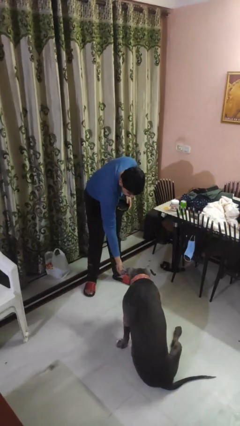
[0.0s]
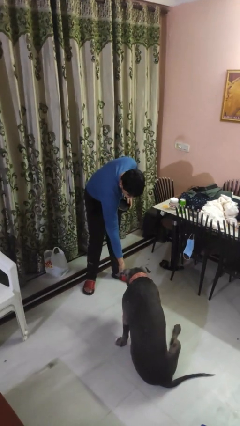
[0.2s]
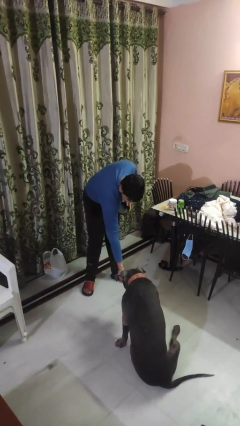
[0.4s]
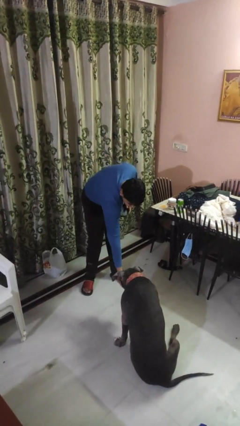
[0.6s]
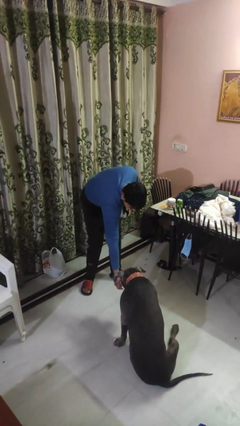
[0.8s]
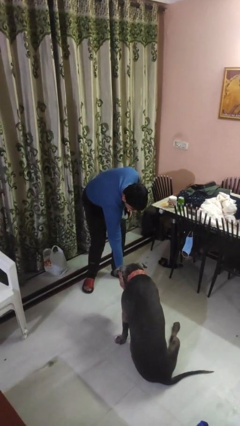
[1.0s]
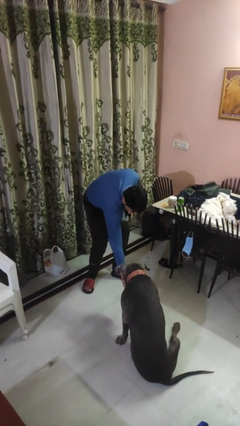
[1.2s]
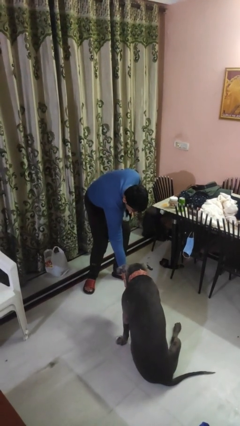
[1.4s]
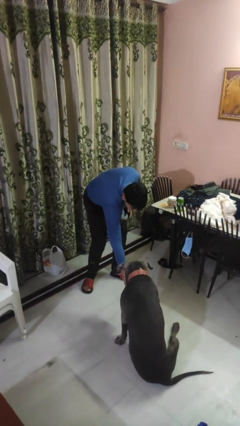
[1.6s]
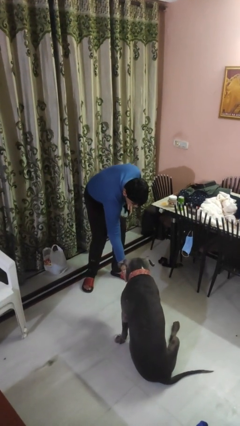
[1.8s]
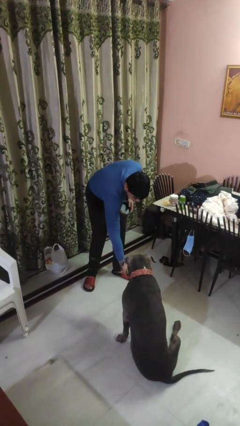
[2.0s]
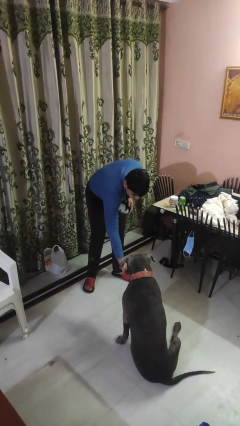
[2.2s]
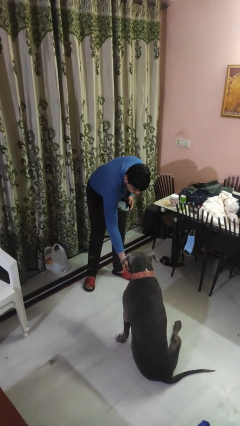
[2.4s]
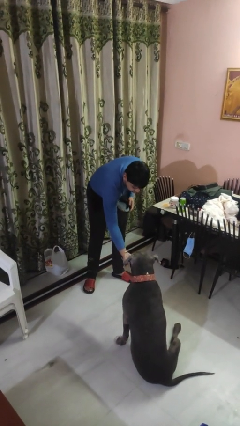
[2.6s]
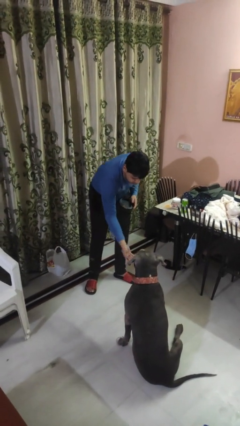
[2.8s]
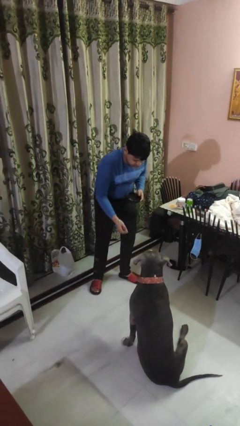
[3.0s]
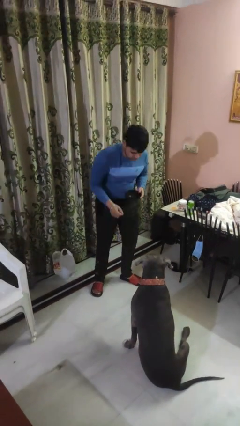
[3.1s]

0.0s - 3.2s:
person feeds dog

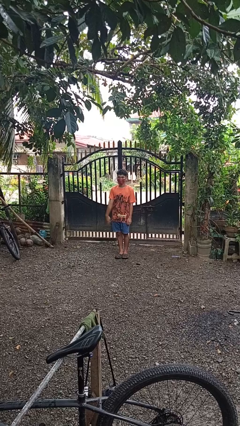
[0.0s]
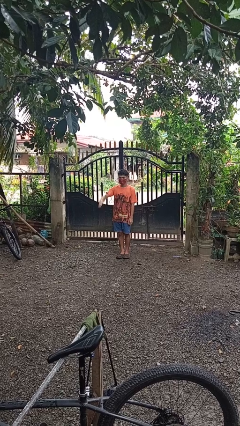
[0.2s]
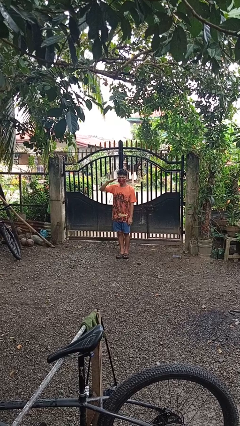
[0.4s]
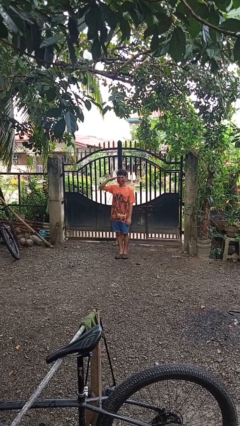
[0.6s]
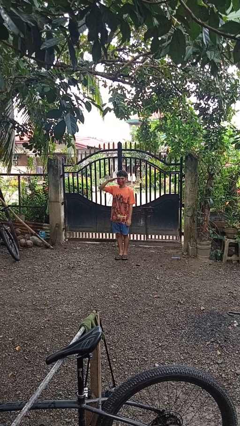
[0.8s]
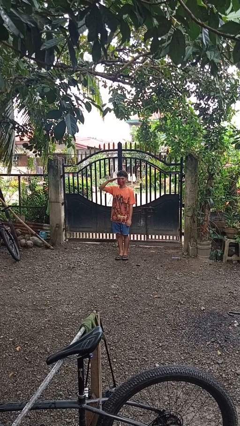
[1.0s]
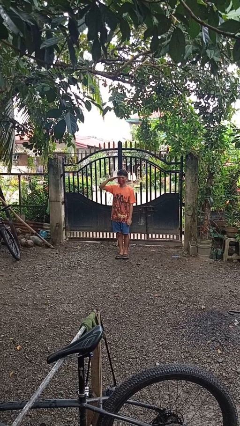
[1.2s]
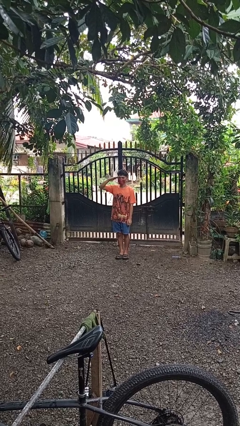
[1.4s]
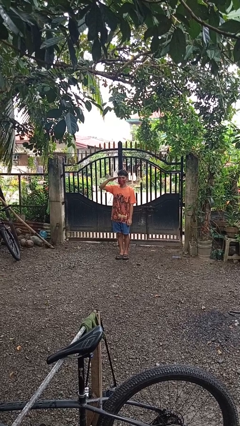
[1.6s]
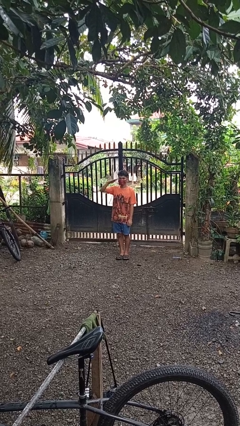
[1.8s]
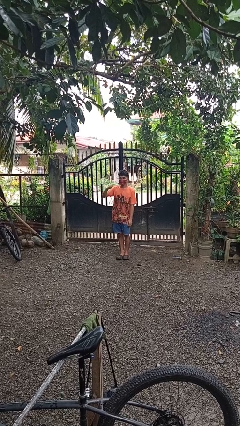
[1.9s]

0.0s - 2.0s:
person salutes

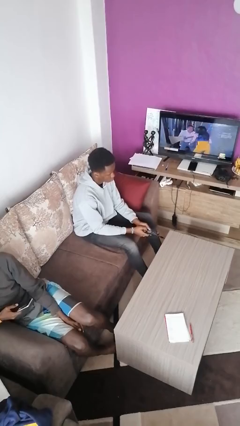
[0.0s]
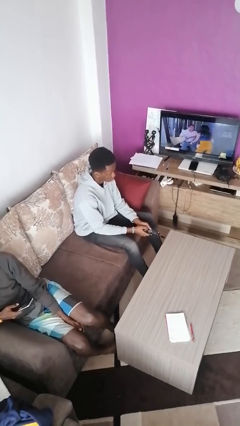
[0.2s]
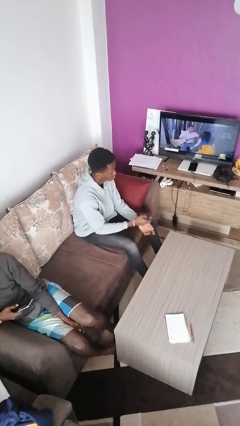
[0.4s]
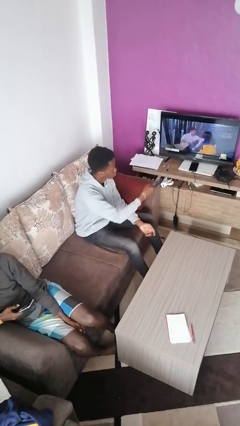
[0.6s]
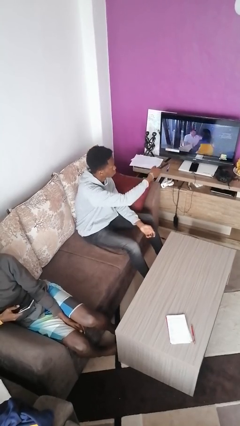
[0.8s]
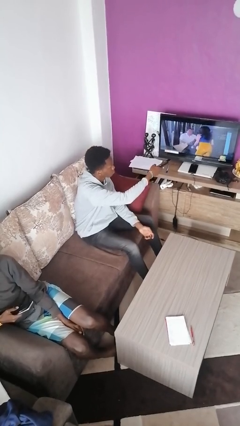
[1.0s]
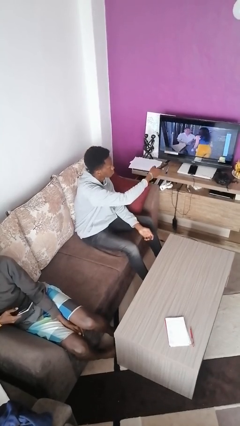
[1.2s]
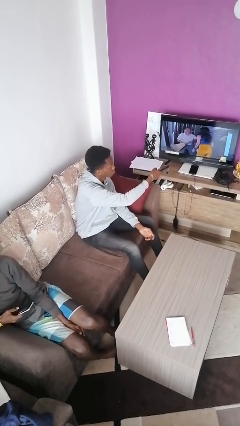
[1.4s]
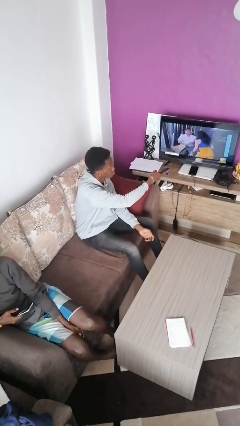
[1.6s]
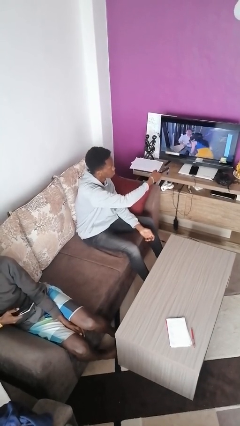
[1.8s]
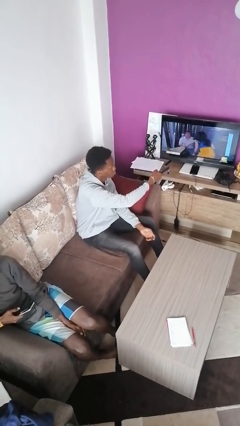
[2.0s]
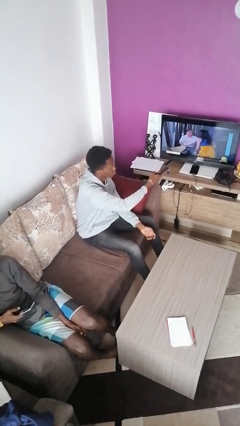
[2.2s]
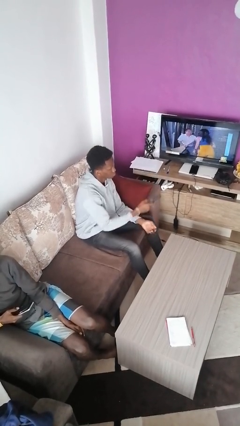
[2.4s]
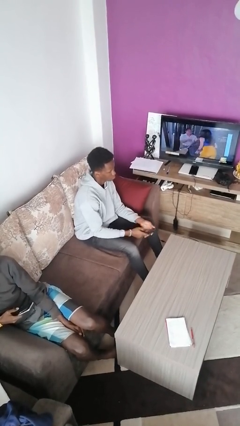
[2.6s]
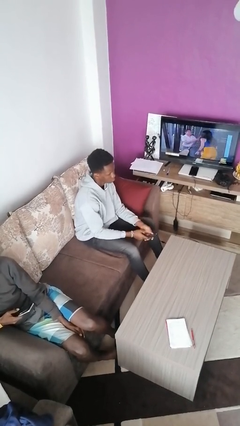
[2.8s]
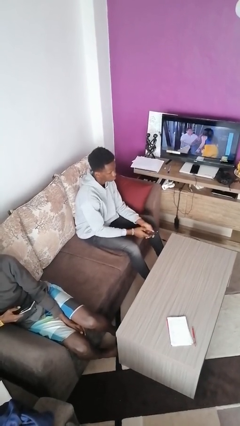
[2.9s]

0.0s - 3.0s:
person uses television remote

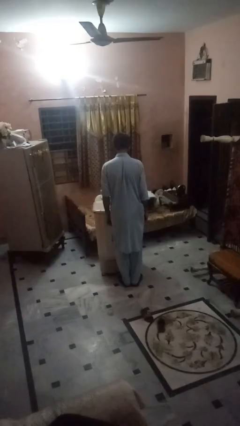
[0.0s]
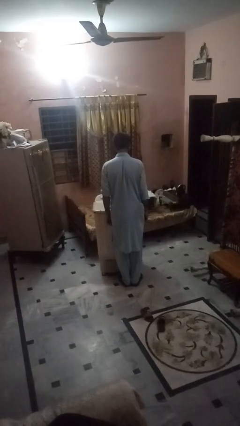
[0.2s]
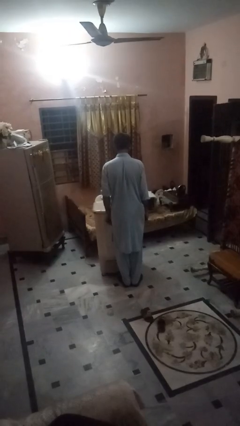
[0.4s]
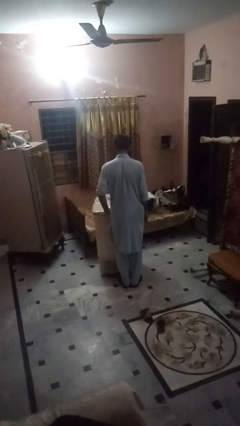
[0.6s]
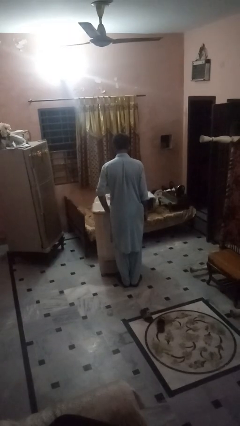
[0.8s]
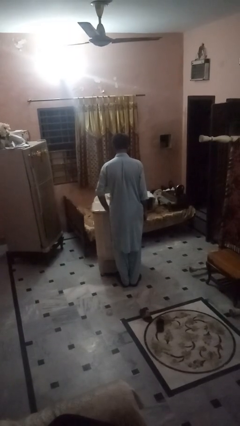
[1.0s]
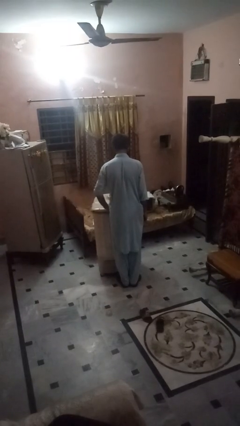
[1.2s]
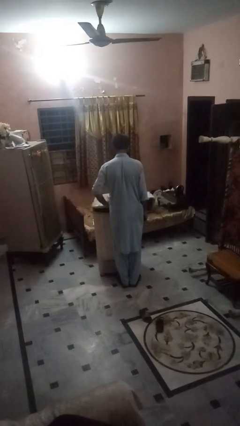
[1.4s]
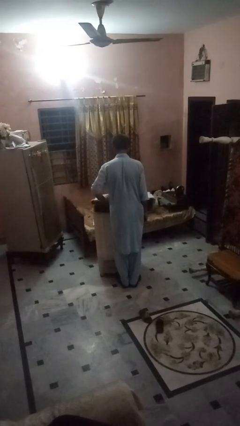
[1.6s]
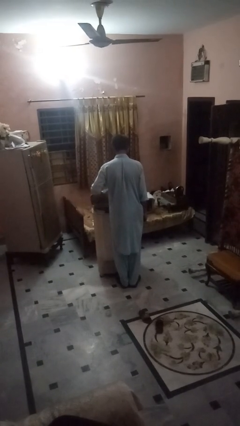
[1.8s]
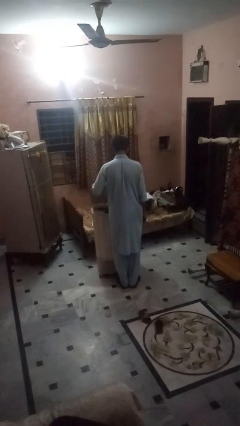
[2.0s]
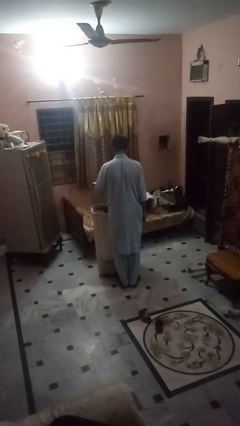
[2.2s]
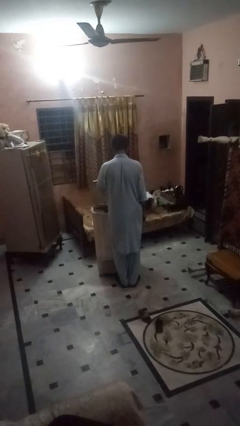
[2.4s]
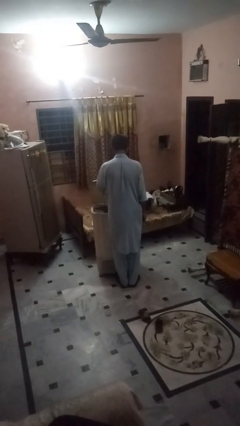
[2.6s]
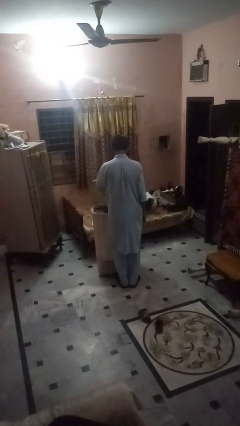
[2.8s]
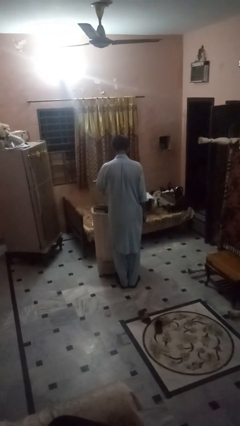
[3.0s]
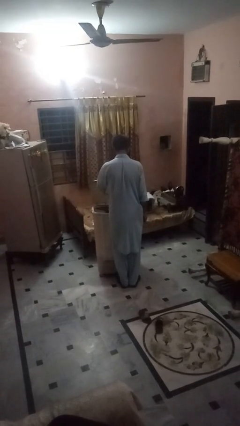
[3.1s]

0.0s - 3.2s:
person opens clothes washer

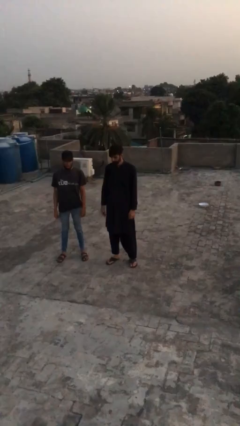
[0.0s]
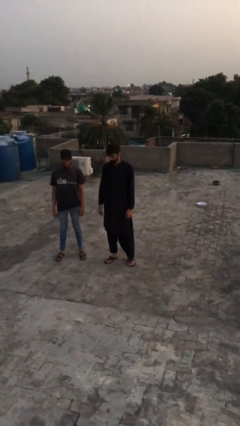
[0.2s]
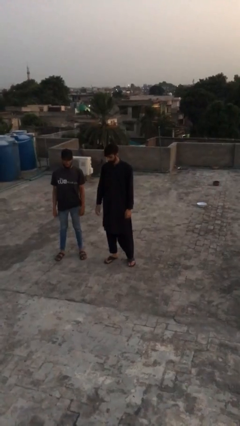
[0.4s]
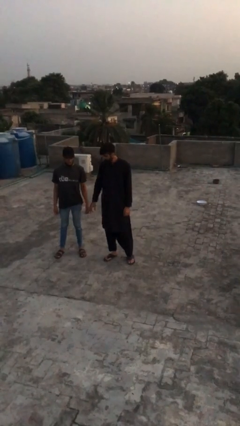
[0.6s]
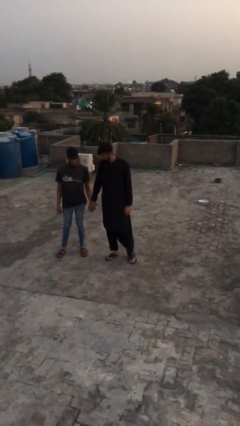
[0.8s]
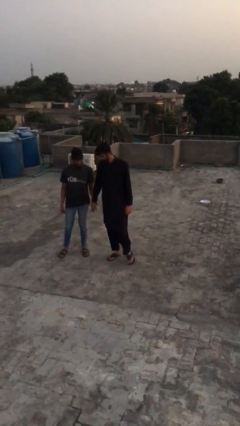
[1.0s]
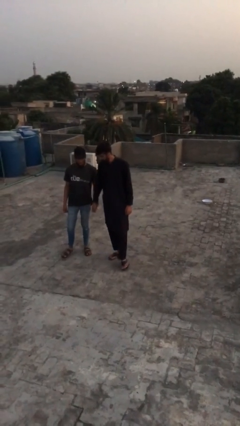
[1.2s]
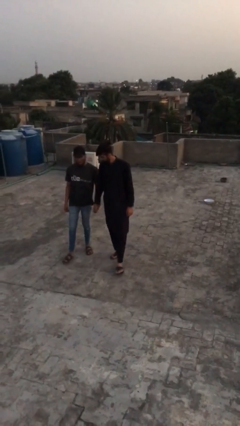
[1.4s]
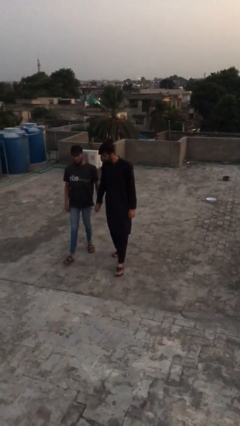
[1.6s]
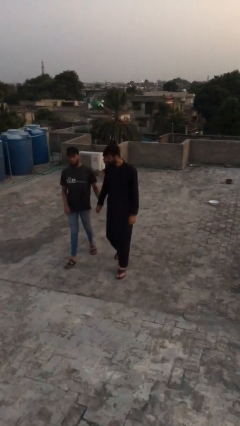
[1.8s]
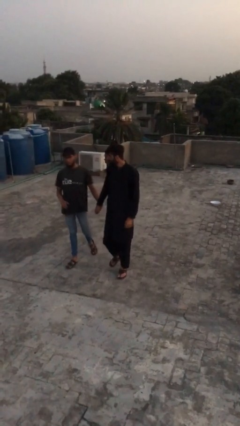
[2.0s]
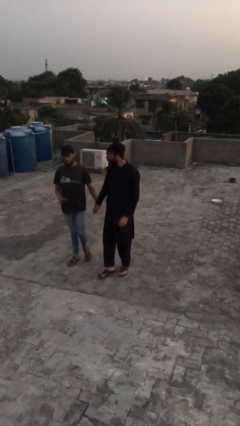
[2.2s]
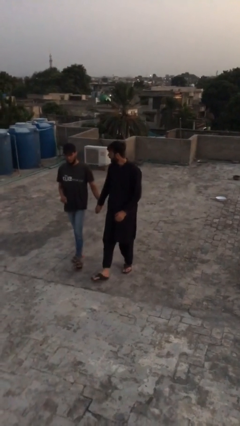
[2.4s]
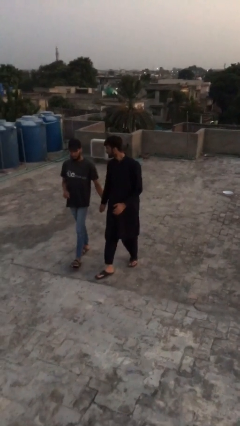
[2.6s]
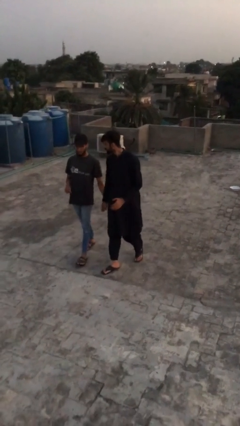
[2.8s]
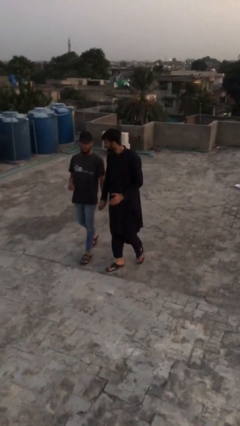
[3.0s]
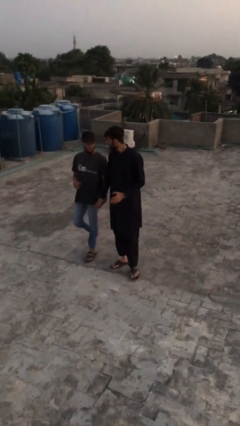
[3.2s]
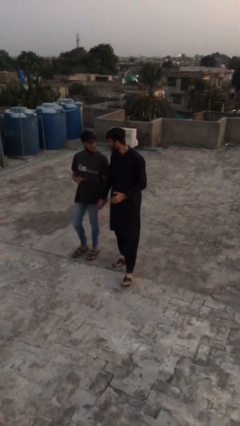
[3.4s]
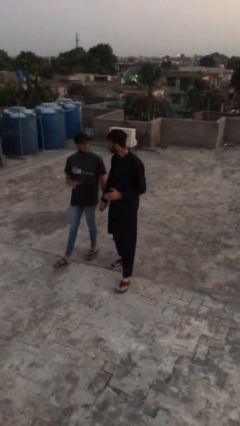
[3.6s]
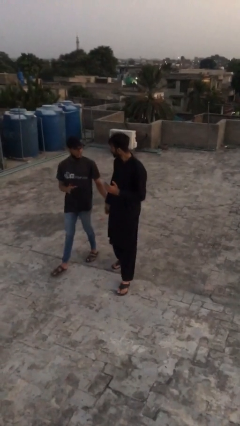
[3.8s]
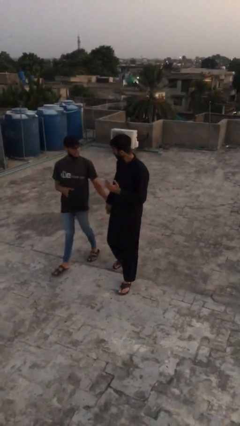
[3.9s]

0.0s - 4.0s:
person holds hand

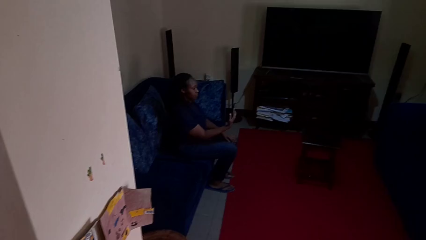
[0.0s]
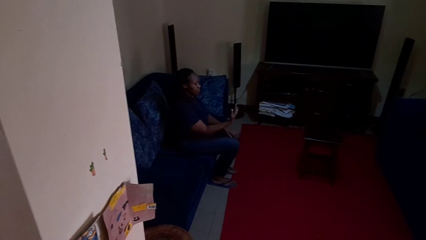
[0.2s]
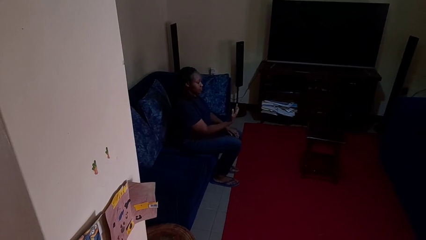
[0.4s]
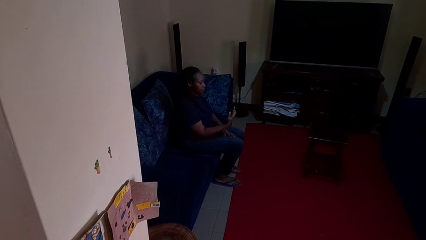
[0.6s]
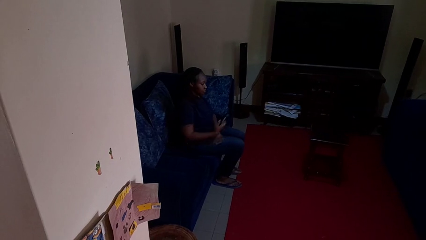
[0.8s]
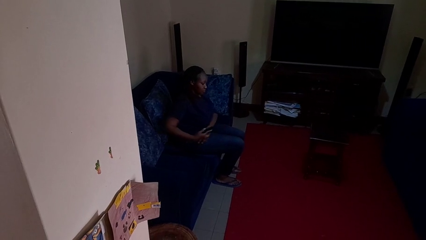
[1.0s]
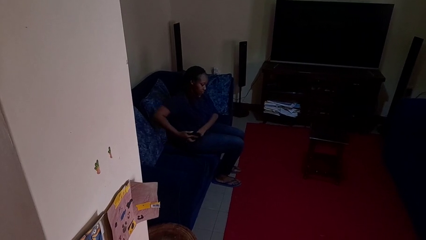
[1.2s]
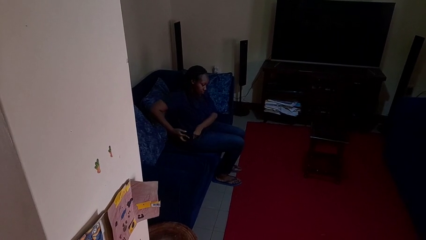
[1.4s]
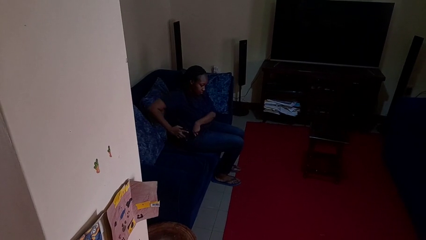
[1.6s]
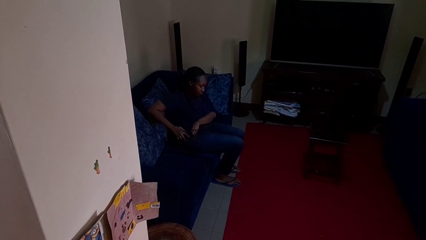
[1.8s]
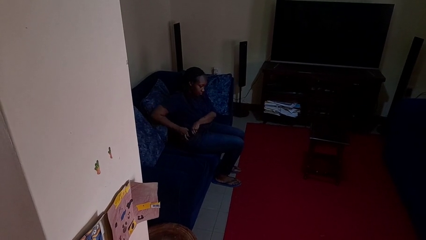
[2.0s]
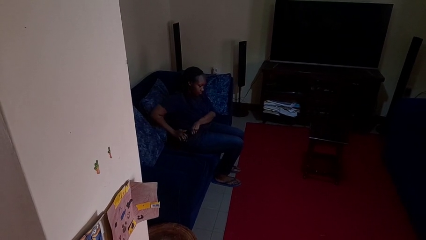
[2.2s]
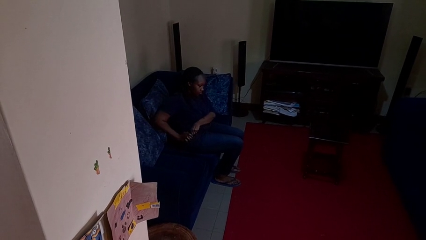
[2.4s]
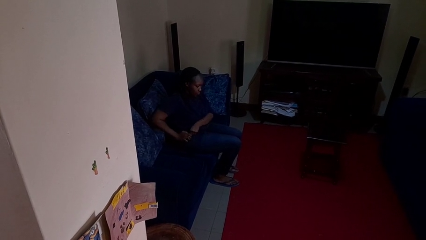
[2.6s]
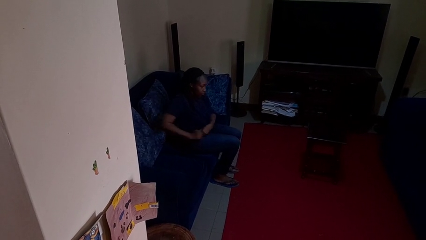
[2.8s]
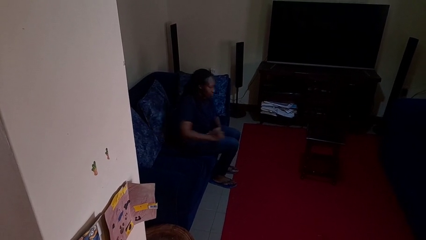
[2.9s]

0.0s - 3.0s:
person puts phone into pocket
